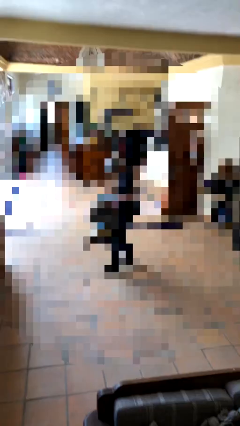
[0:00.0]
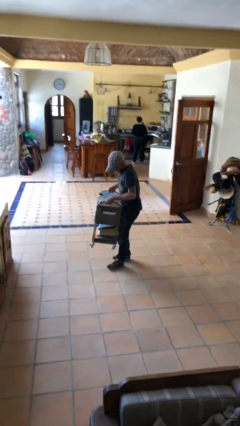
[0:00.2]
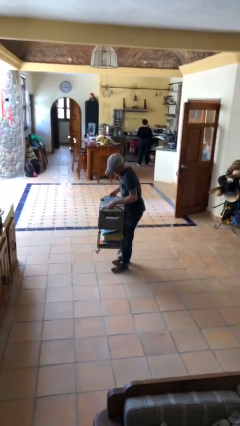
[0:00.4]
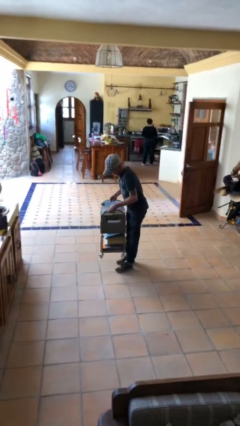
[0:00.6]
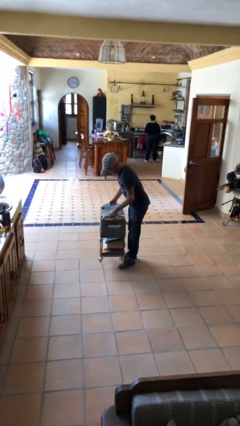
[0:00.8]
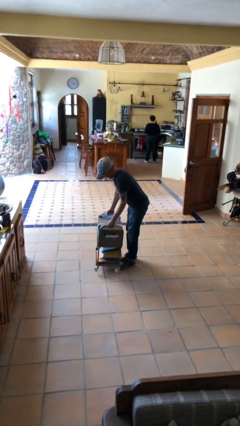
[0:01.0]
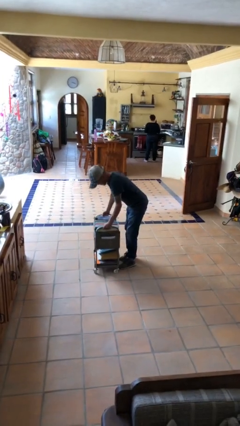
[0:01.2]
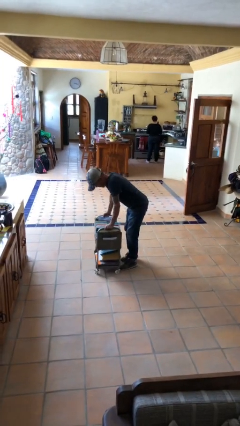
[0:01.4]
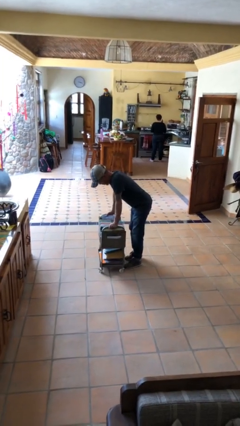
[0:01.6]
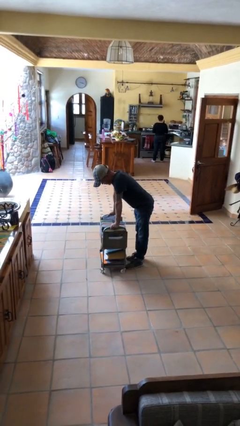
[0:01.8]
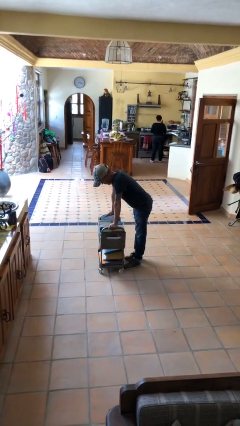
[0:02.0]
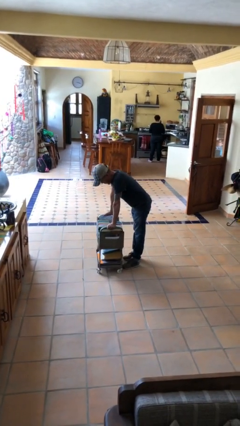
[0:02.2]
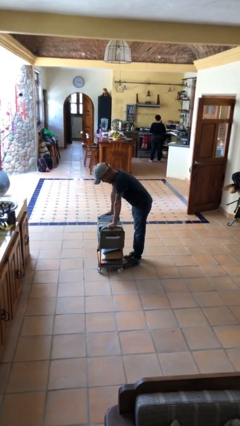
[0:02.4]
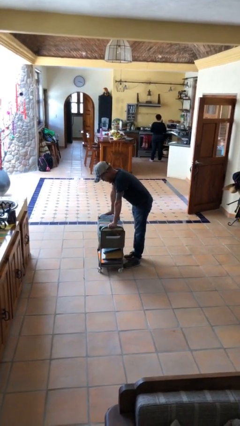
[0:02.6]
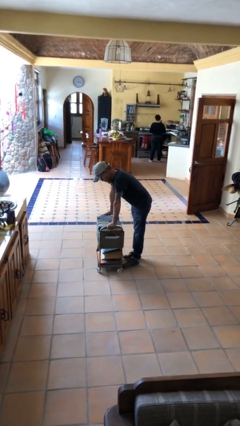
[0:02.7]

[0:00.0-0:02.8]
person puts down object on floor

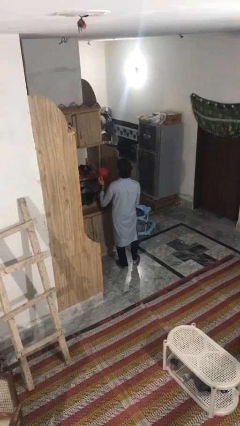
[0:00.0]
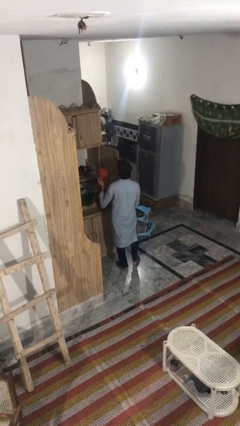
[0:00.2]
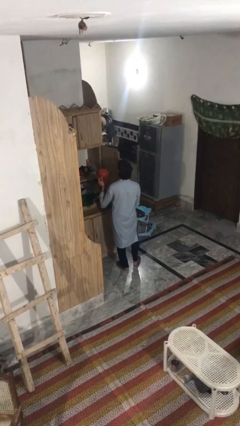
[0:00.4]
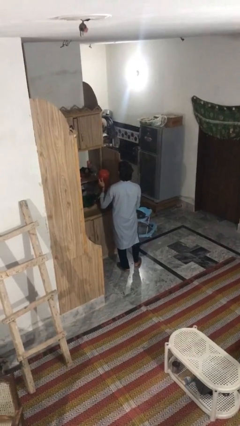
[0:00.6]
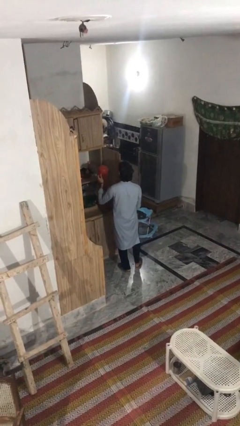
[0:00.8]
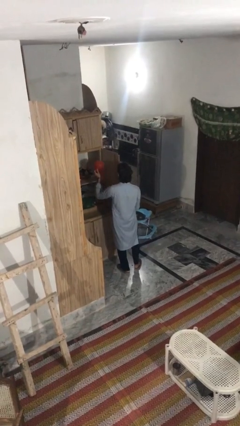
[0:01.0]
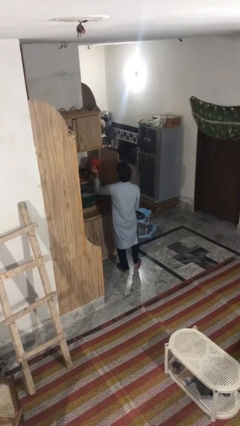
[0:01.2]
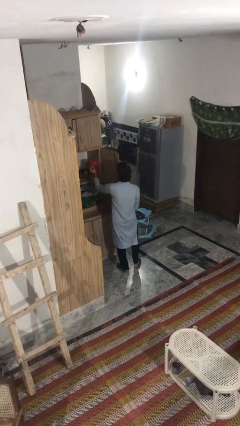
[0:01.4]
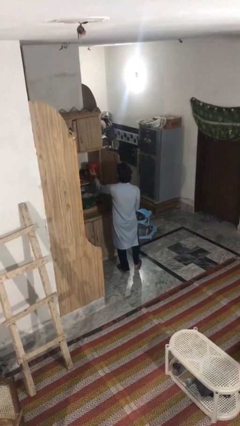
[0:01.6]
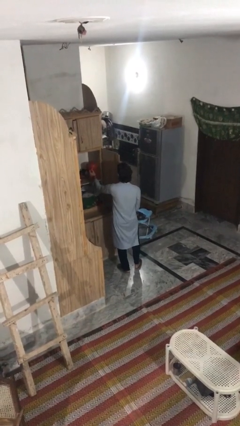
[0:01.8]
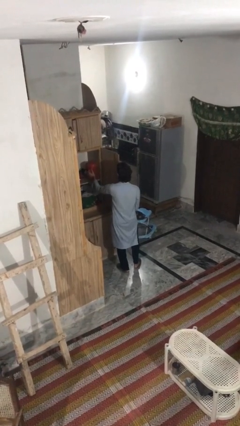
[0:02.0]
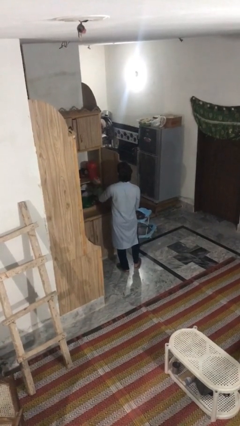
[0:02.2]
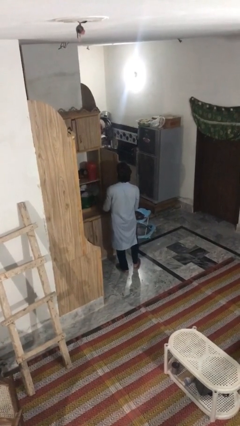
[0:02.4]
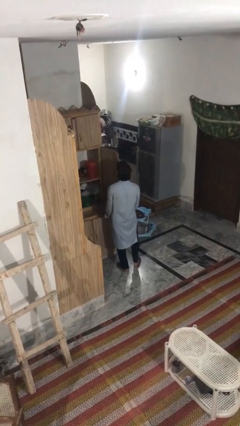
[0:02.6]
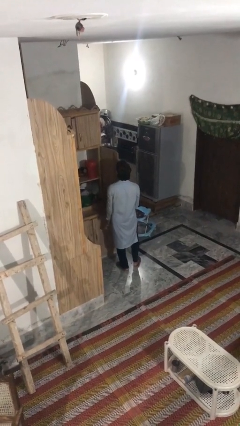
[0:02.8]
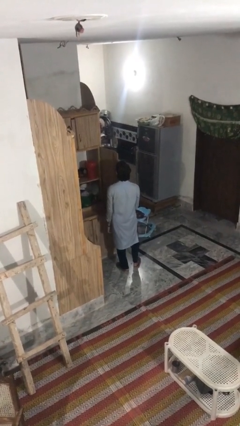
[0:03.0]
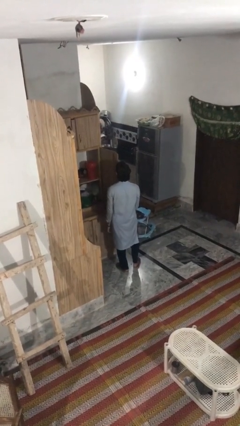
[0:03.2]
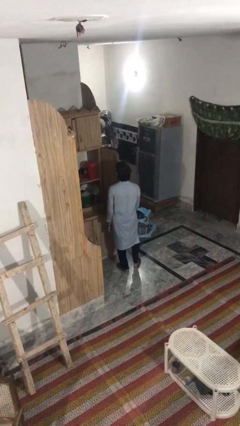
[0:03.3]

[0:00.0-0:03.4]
person puts down object into cabinet

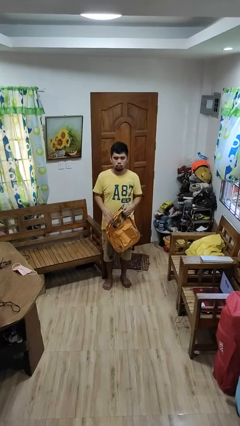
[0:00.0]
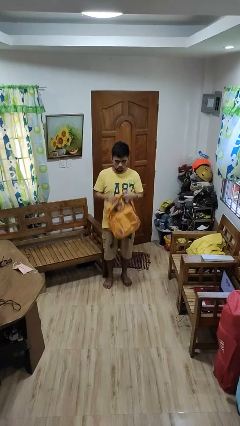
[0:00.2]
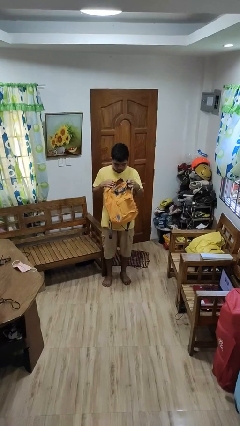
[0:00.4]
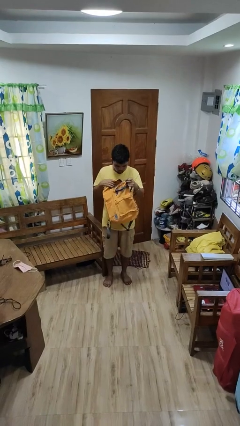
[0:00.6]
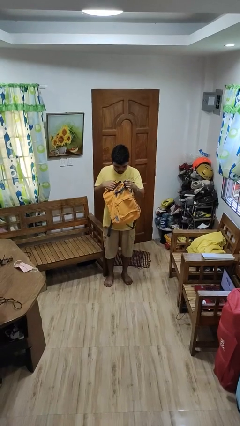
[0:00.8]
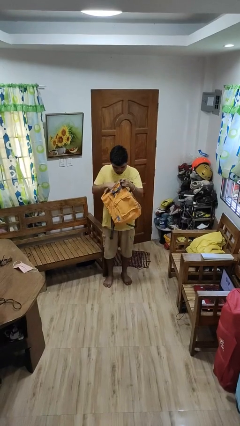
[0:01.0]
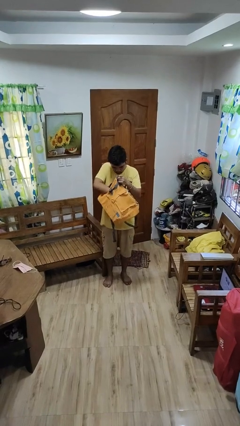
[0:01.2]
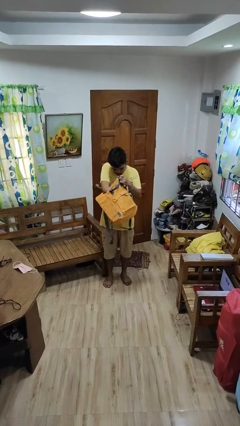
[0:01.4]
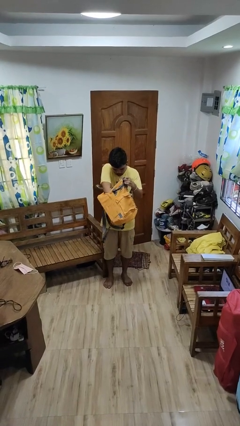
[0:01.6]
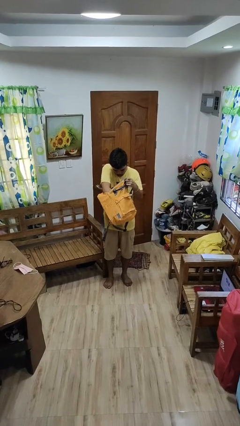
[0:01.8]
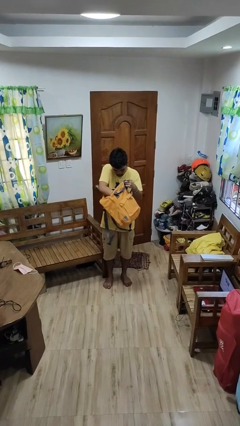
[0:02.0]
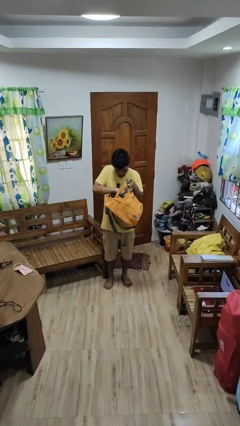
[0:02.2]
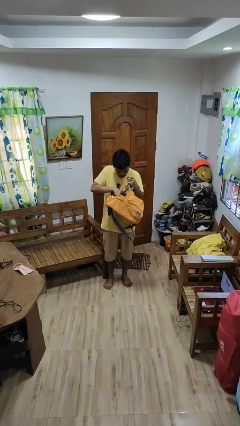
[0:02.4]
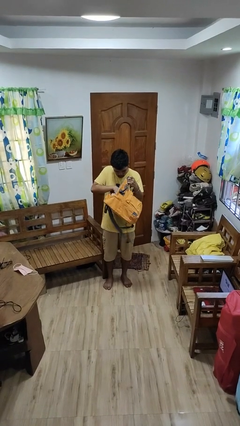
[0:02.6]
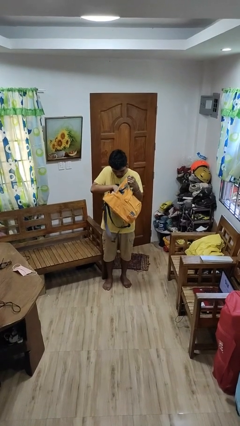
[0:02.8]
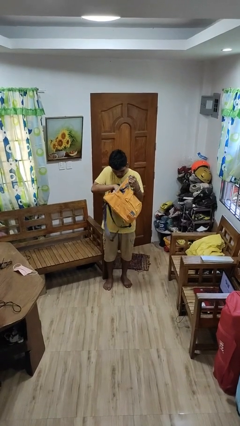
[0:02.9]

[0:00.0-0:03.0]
person searches in backpack

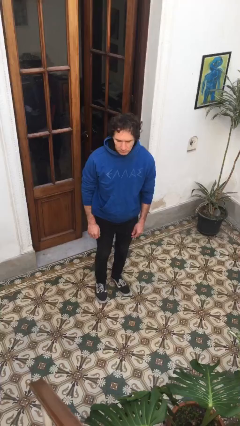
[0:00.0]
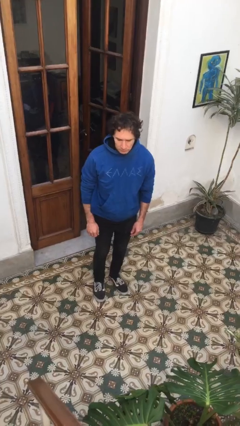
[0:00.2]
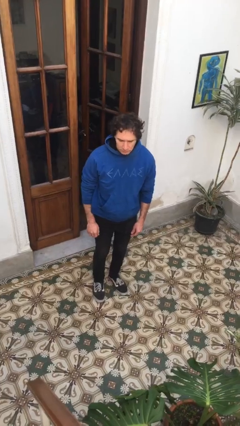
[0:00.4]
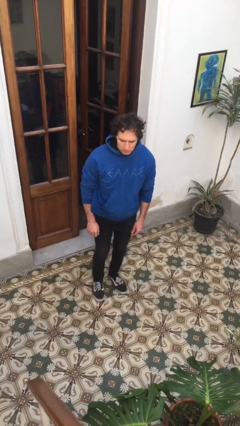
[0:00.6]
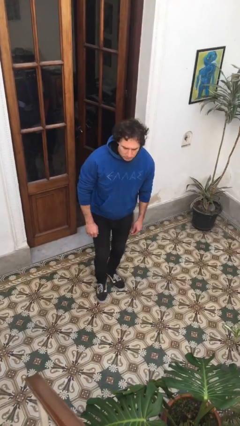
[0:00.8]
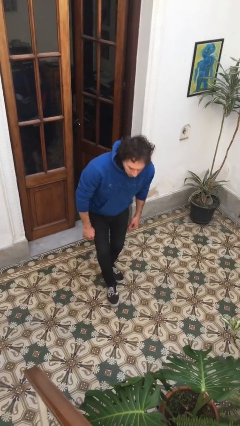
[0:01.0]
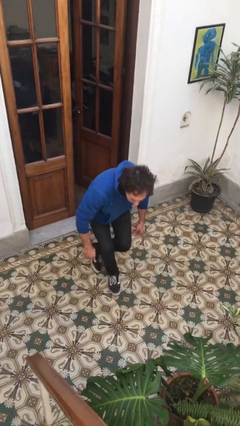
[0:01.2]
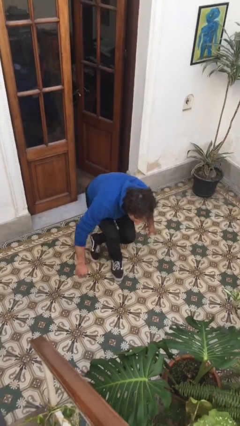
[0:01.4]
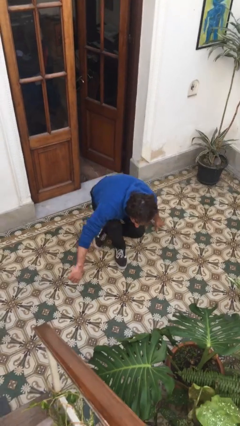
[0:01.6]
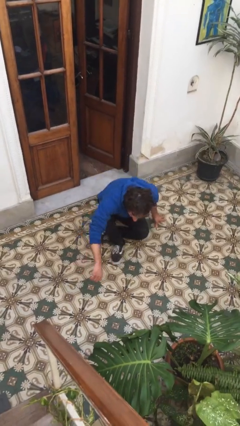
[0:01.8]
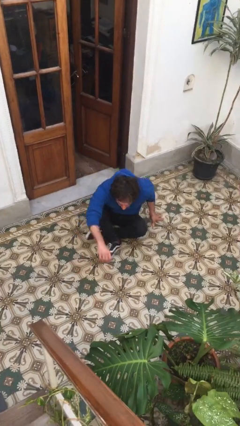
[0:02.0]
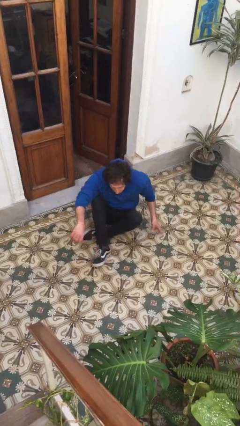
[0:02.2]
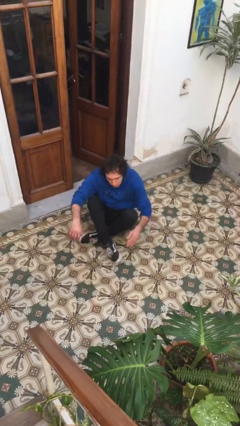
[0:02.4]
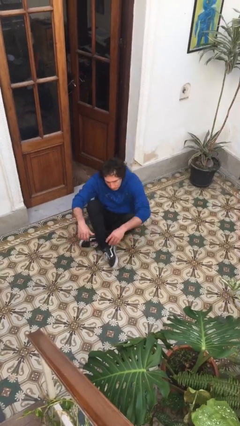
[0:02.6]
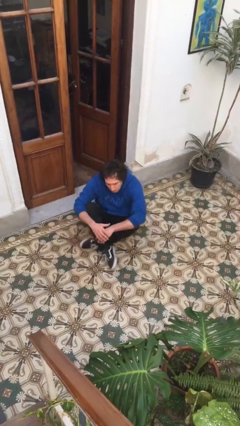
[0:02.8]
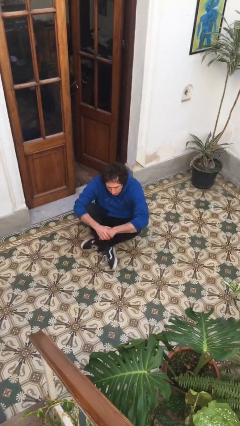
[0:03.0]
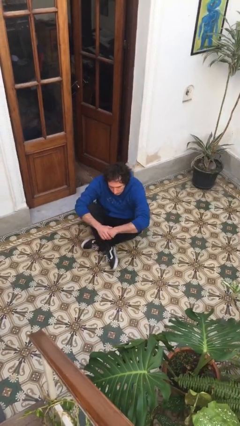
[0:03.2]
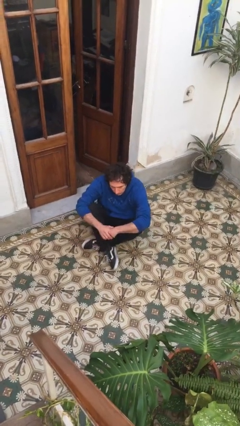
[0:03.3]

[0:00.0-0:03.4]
person sits crisscross

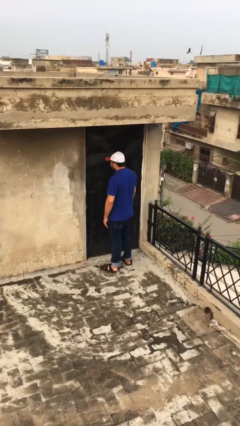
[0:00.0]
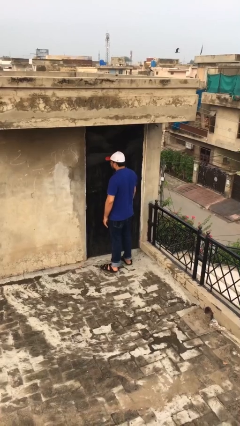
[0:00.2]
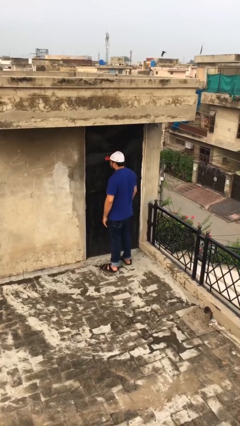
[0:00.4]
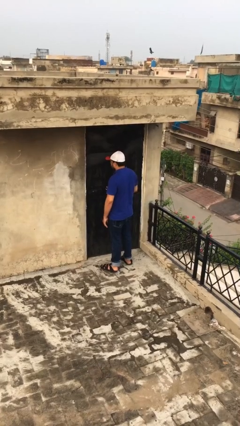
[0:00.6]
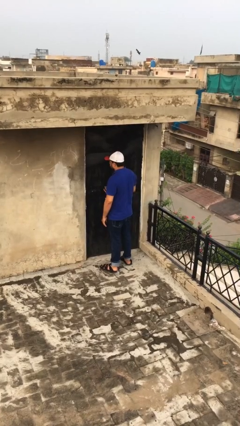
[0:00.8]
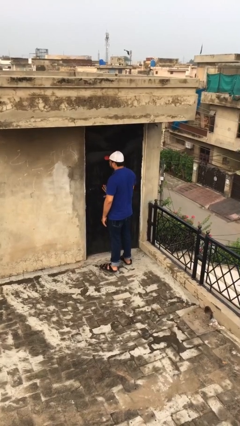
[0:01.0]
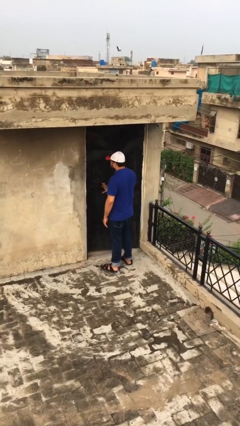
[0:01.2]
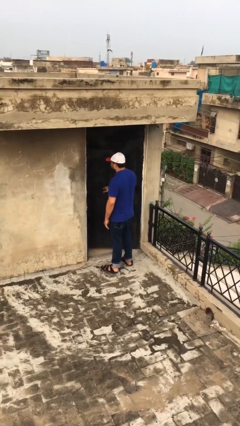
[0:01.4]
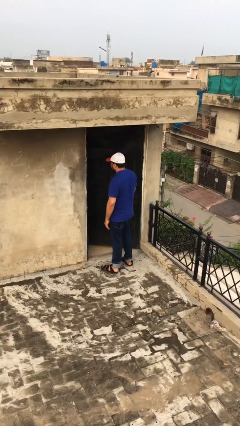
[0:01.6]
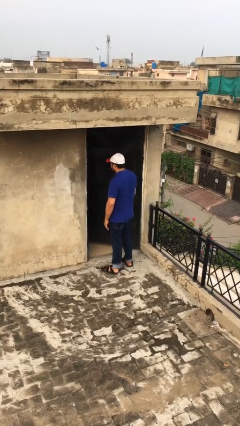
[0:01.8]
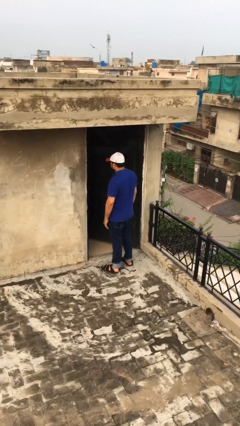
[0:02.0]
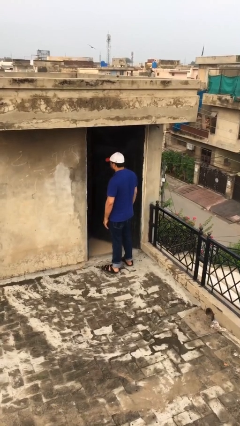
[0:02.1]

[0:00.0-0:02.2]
person opens facility door

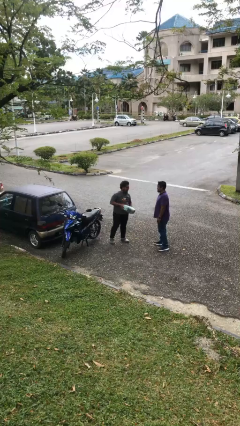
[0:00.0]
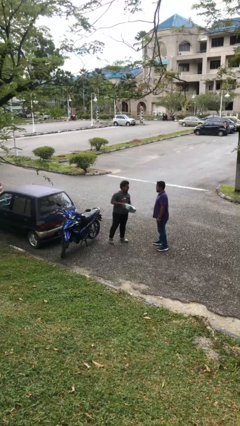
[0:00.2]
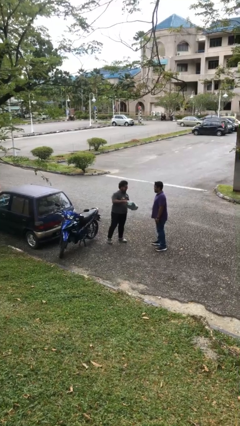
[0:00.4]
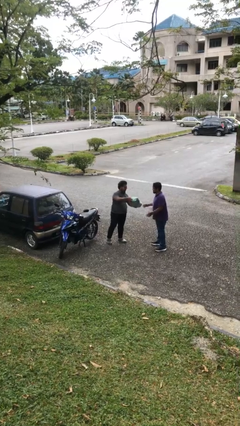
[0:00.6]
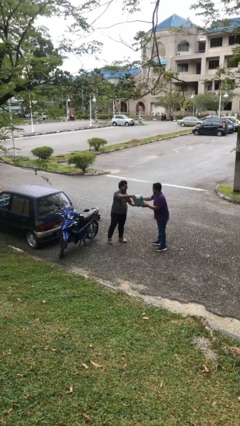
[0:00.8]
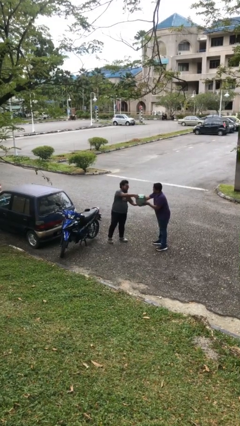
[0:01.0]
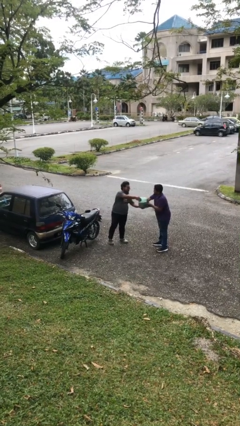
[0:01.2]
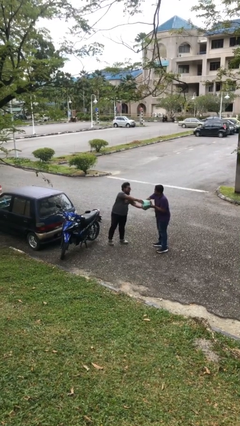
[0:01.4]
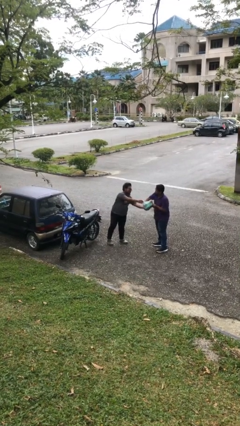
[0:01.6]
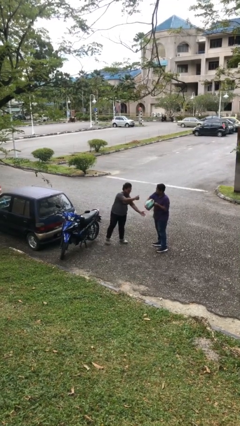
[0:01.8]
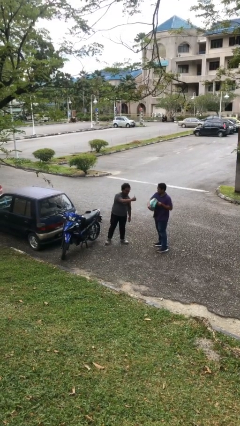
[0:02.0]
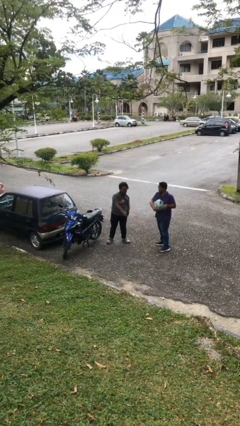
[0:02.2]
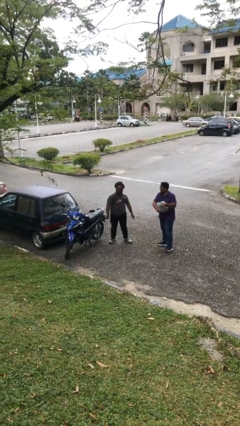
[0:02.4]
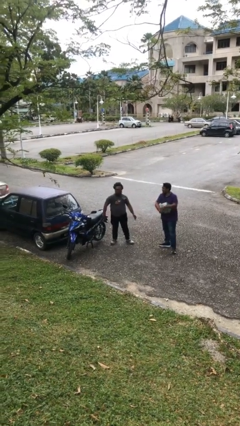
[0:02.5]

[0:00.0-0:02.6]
person transfers object to person
